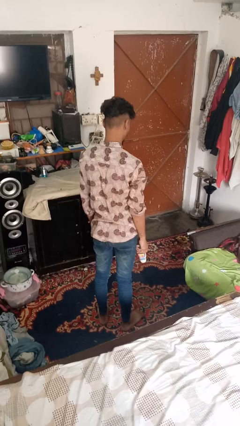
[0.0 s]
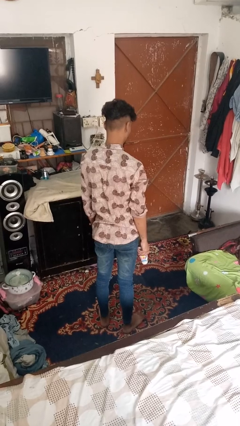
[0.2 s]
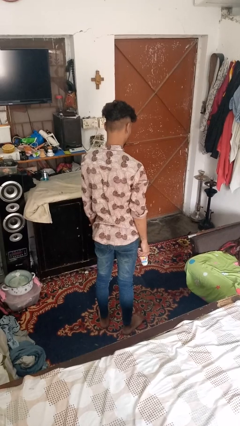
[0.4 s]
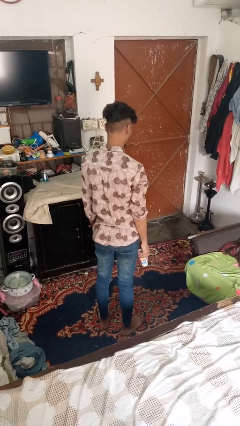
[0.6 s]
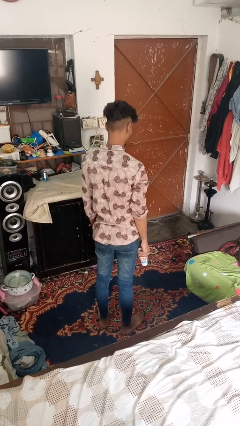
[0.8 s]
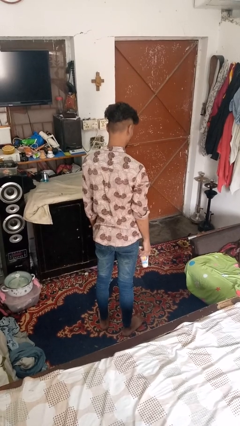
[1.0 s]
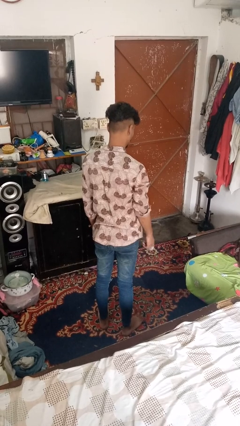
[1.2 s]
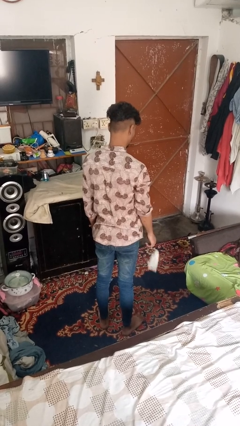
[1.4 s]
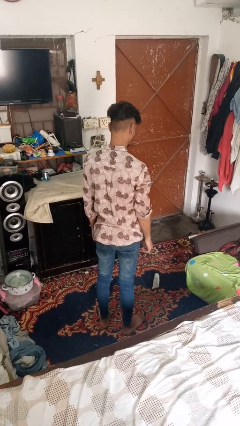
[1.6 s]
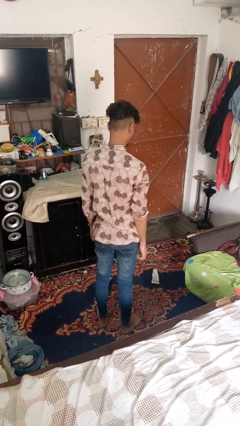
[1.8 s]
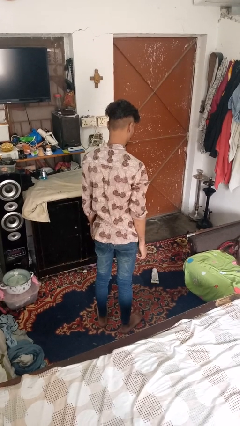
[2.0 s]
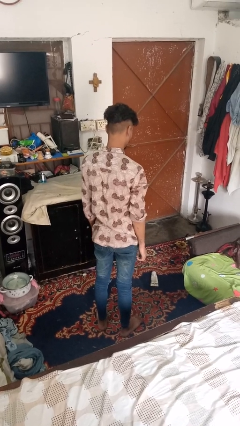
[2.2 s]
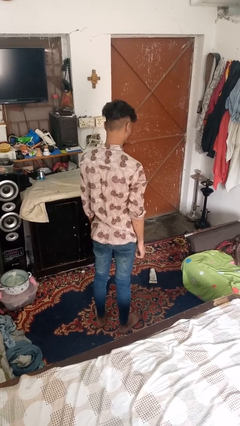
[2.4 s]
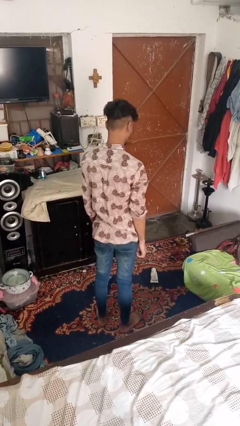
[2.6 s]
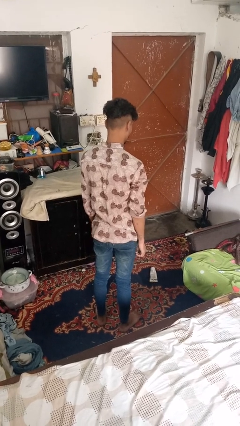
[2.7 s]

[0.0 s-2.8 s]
person throws object to ground

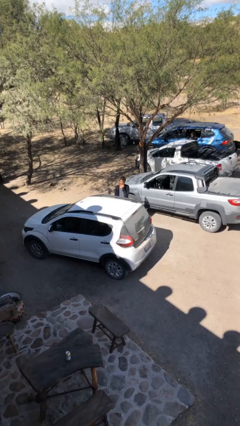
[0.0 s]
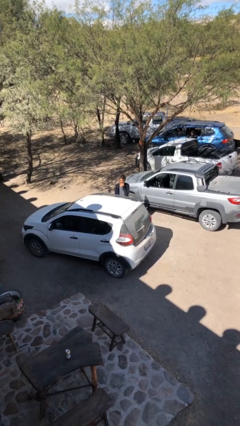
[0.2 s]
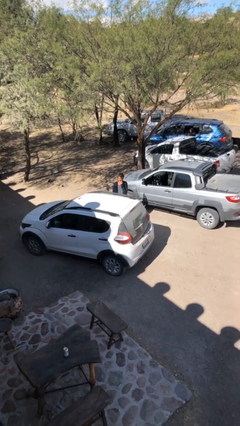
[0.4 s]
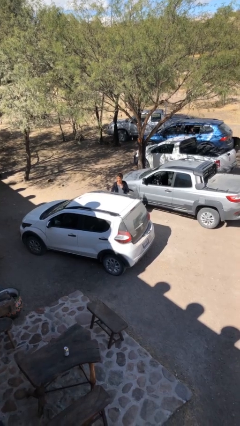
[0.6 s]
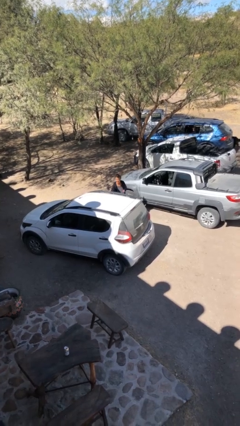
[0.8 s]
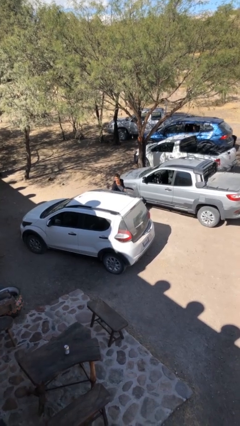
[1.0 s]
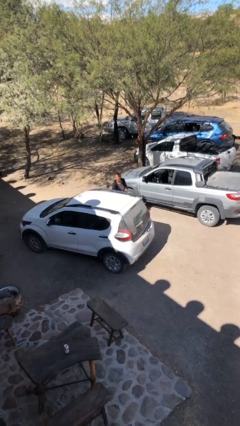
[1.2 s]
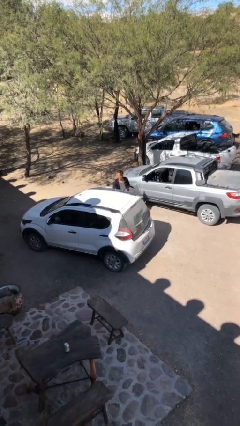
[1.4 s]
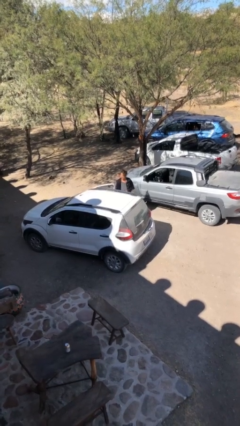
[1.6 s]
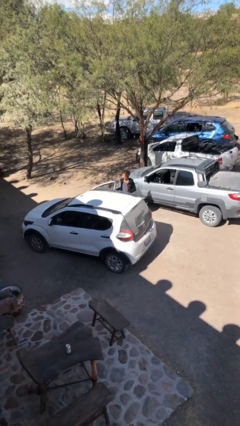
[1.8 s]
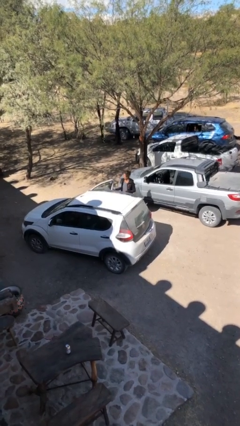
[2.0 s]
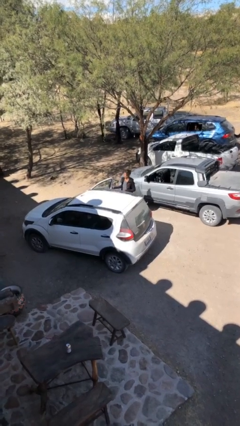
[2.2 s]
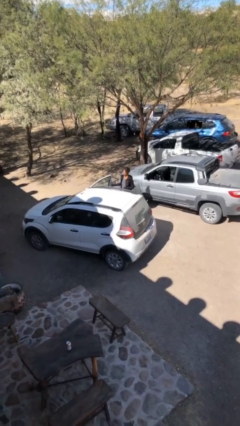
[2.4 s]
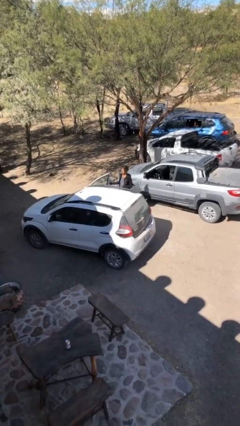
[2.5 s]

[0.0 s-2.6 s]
person opens car door

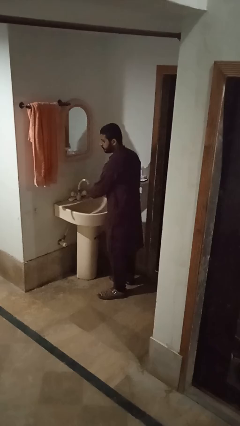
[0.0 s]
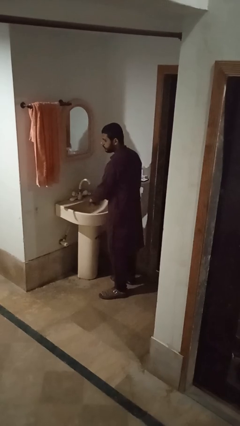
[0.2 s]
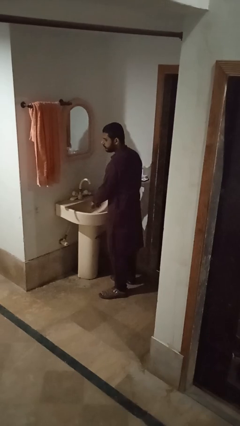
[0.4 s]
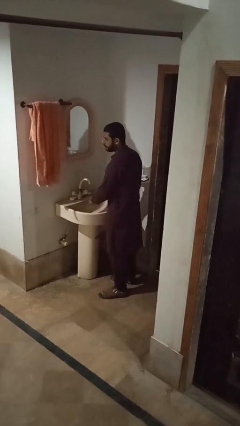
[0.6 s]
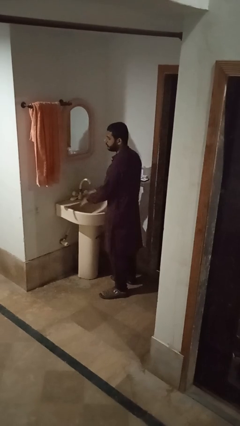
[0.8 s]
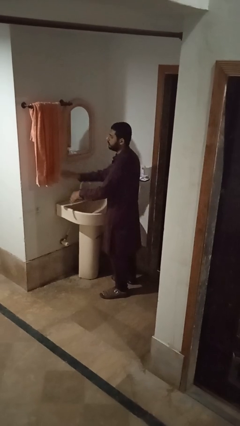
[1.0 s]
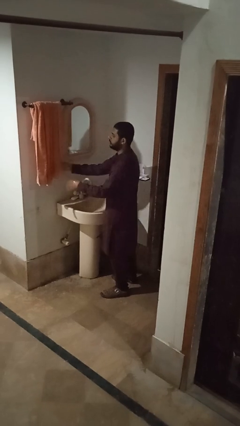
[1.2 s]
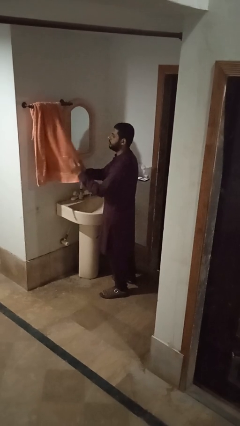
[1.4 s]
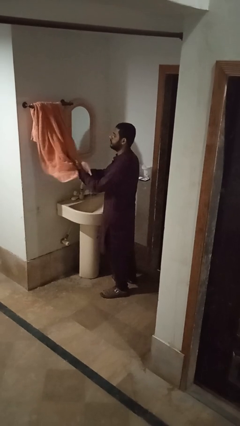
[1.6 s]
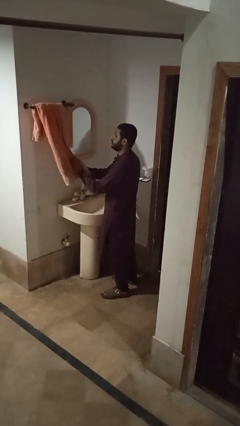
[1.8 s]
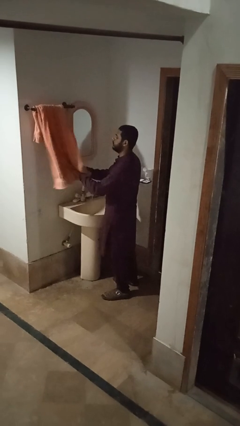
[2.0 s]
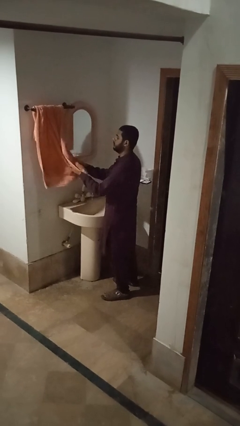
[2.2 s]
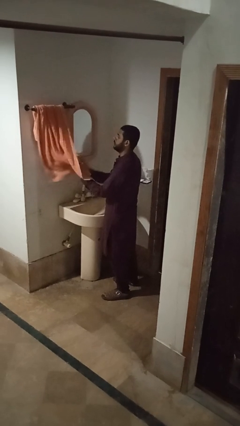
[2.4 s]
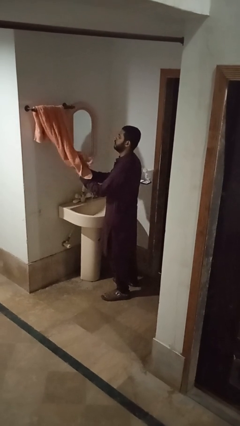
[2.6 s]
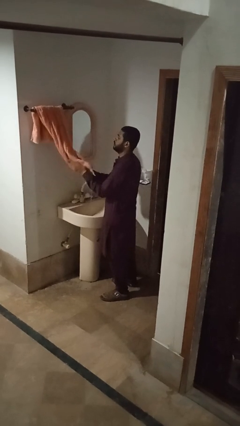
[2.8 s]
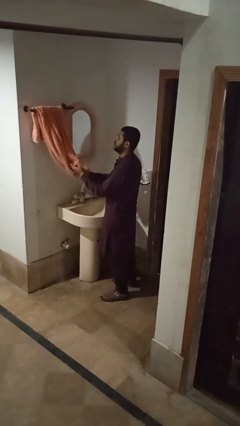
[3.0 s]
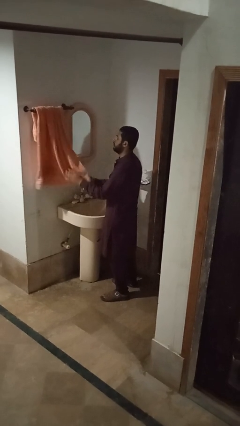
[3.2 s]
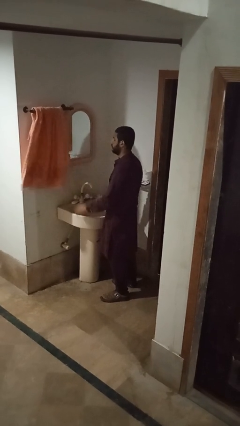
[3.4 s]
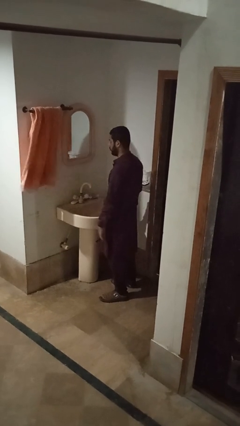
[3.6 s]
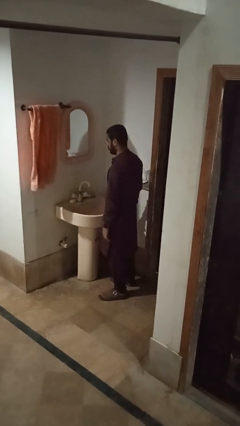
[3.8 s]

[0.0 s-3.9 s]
person dries hands with towel

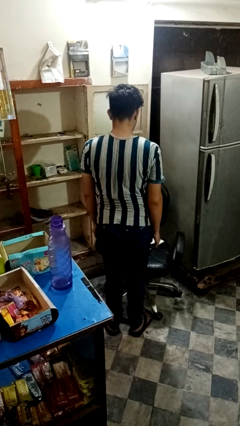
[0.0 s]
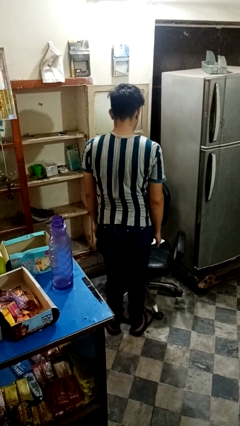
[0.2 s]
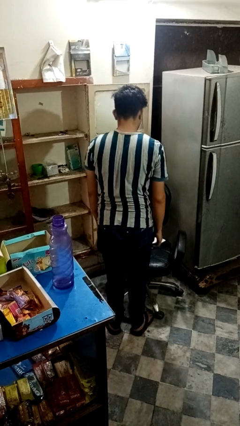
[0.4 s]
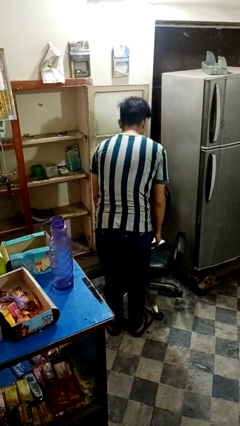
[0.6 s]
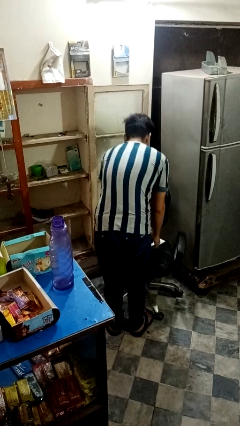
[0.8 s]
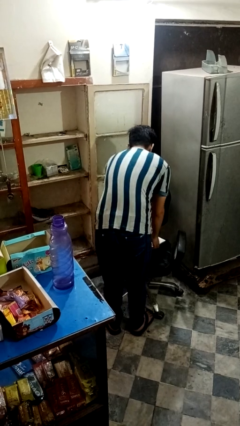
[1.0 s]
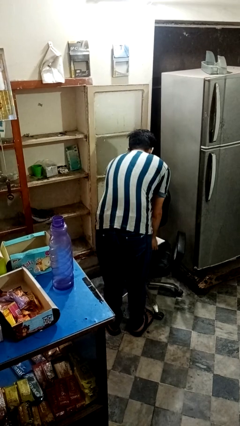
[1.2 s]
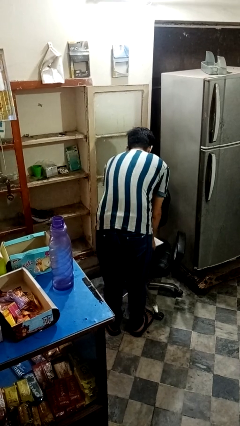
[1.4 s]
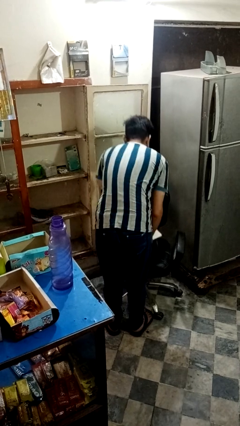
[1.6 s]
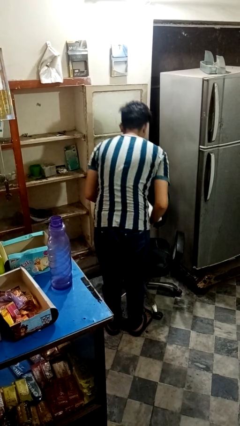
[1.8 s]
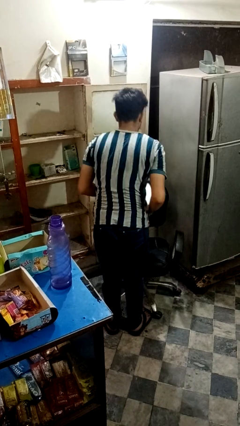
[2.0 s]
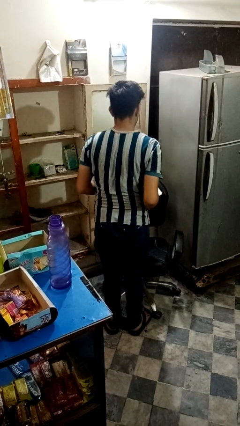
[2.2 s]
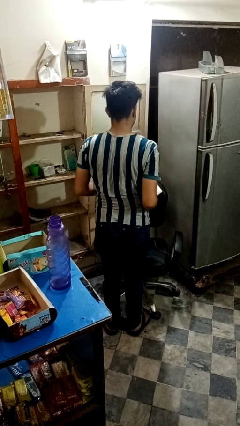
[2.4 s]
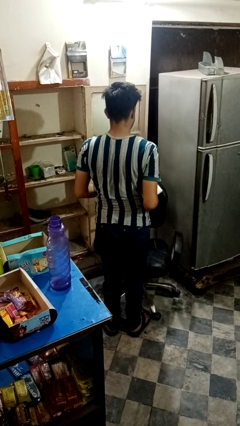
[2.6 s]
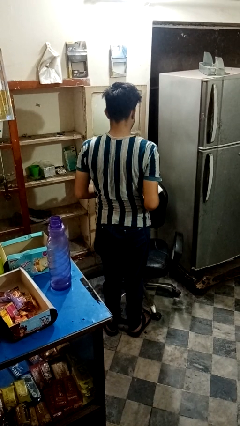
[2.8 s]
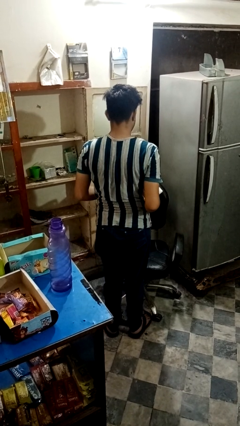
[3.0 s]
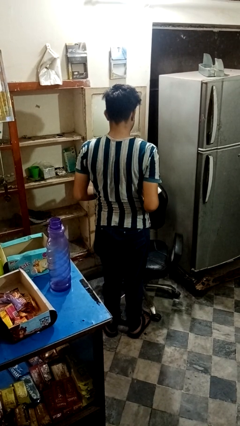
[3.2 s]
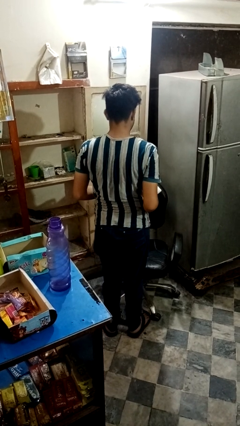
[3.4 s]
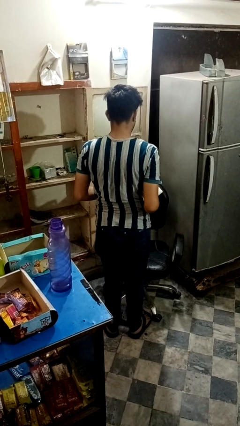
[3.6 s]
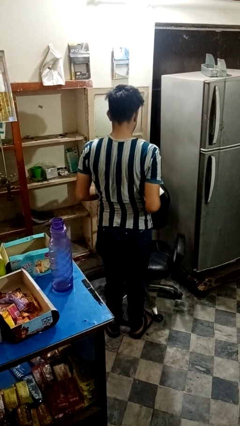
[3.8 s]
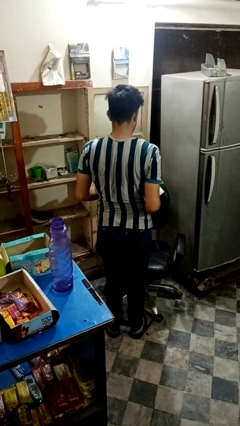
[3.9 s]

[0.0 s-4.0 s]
person picks up object from couch

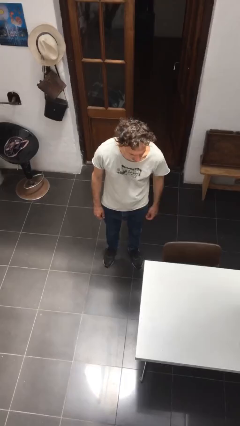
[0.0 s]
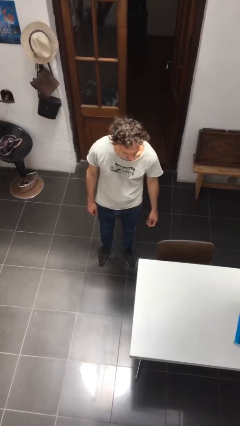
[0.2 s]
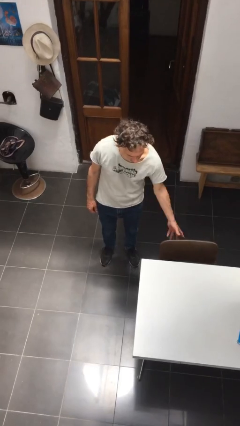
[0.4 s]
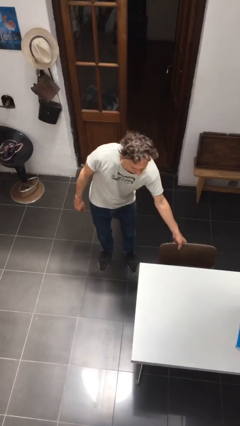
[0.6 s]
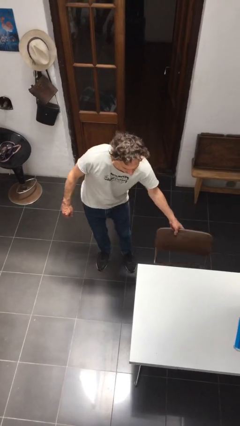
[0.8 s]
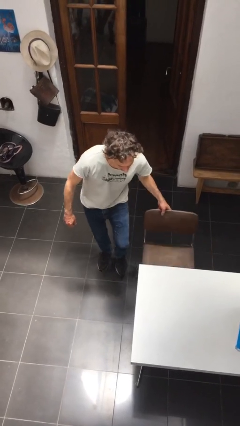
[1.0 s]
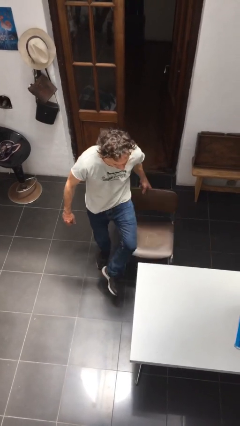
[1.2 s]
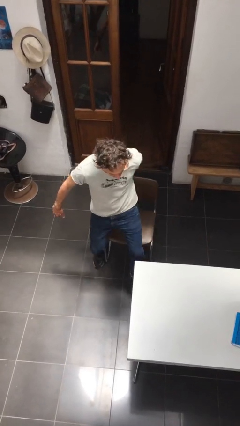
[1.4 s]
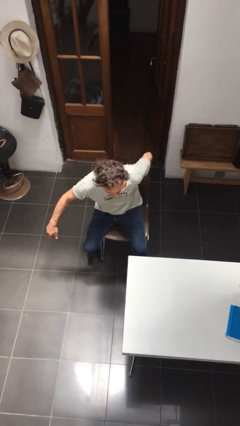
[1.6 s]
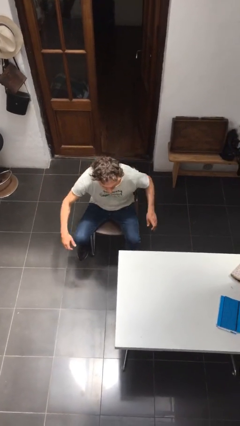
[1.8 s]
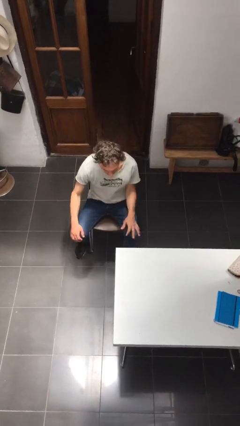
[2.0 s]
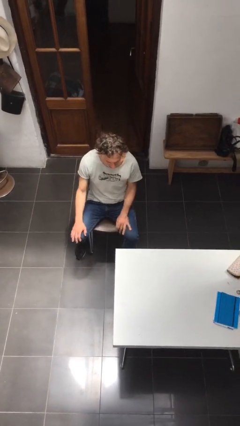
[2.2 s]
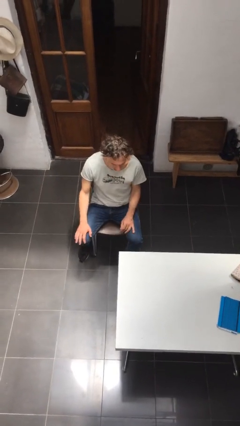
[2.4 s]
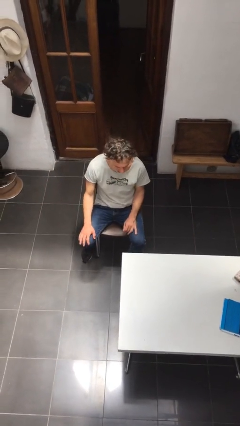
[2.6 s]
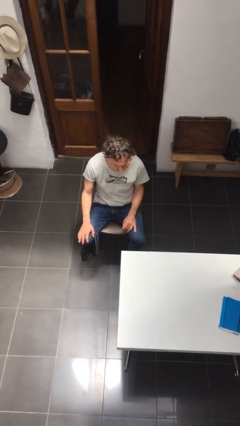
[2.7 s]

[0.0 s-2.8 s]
person sits down

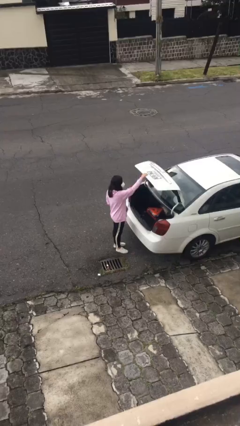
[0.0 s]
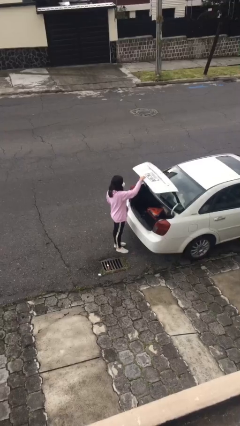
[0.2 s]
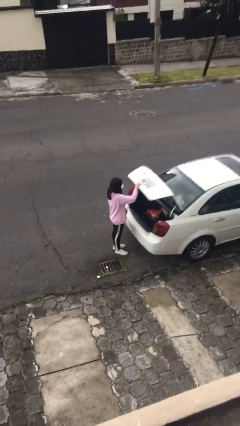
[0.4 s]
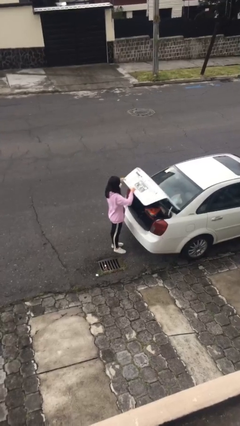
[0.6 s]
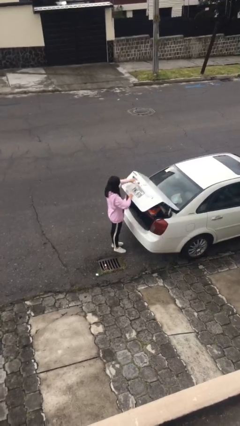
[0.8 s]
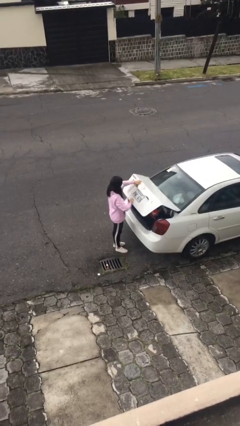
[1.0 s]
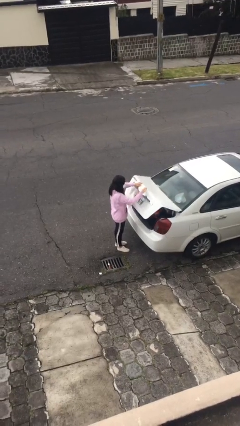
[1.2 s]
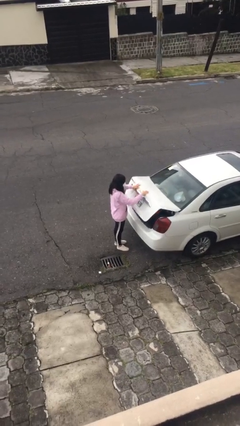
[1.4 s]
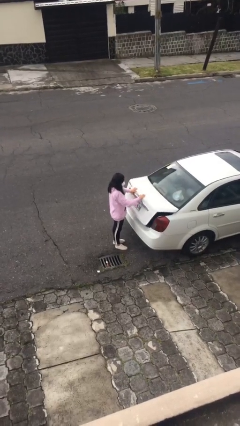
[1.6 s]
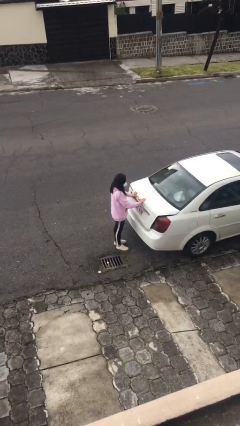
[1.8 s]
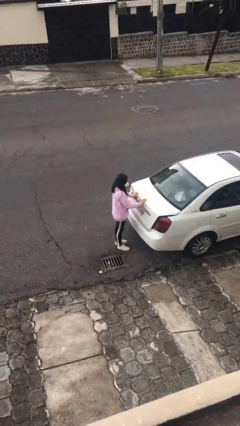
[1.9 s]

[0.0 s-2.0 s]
person closes car trunk
